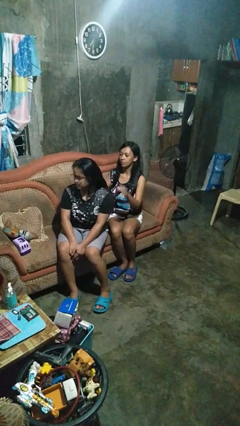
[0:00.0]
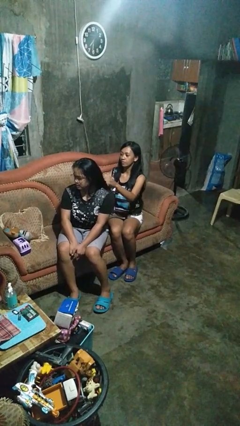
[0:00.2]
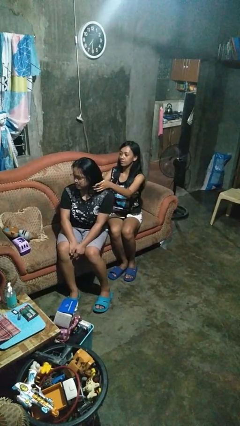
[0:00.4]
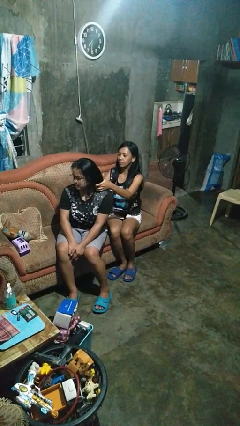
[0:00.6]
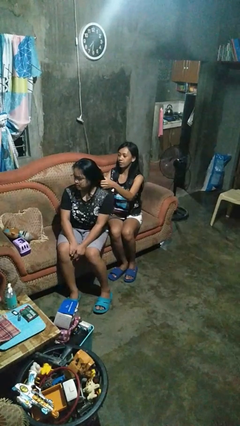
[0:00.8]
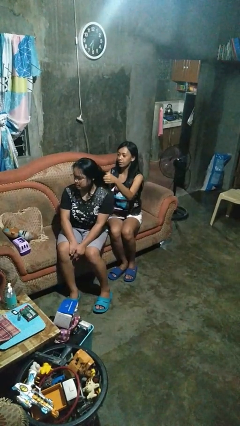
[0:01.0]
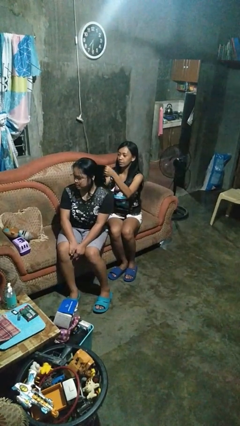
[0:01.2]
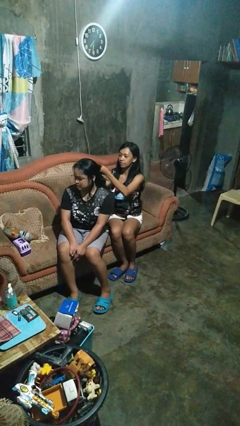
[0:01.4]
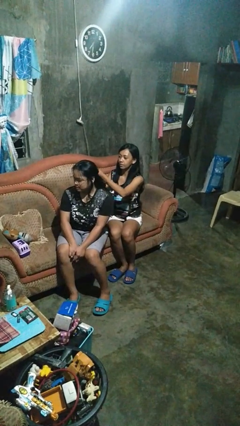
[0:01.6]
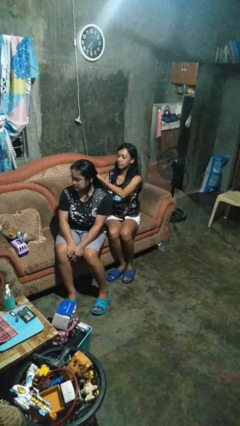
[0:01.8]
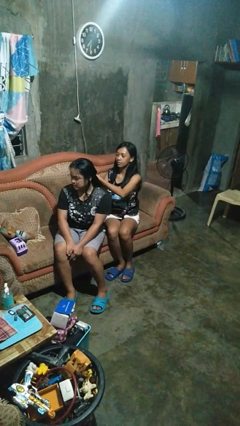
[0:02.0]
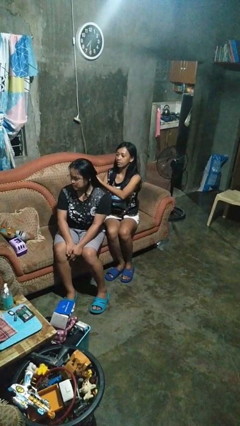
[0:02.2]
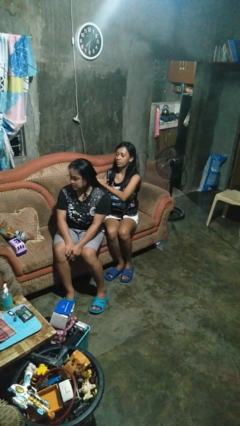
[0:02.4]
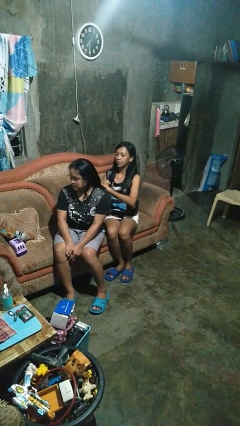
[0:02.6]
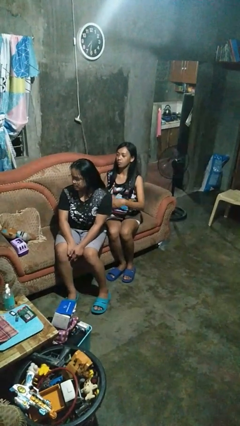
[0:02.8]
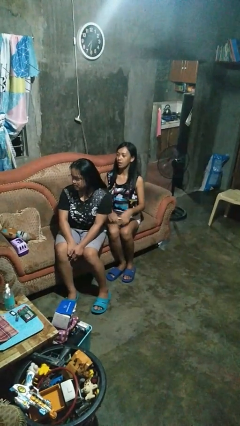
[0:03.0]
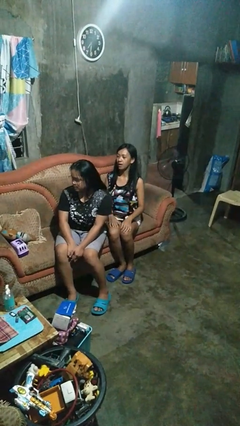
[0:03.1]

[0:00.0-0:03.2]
person braids hair of person

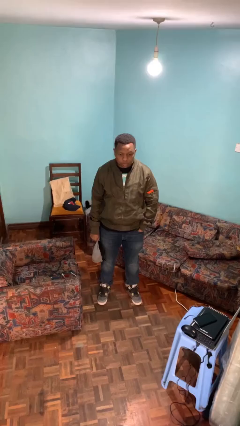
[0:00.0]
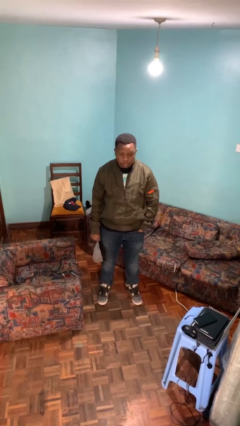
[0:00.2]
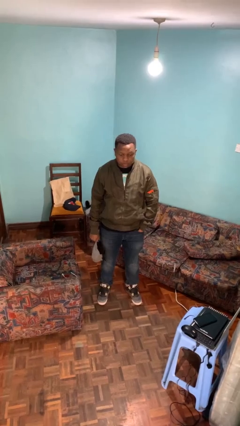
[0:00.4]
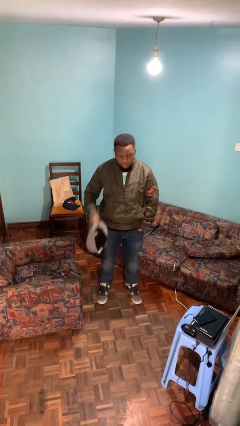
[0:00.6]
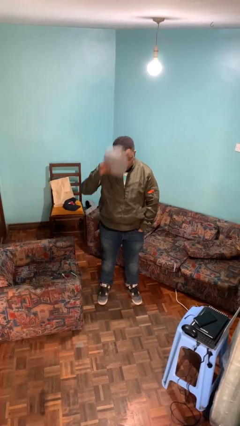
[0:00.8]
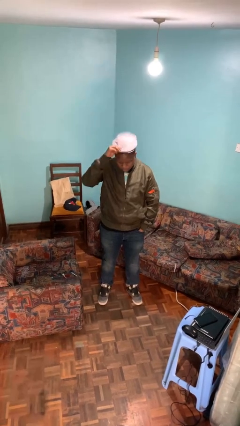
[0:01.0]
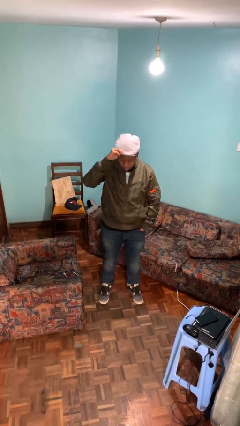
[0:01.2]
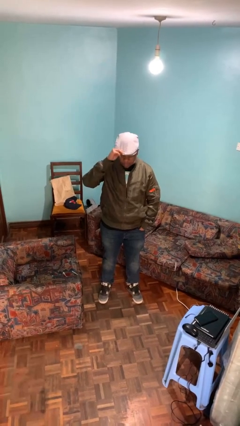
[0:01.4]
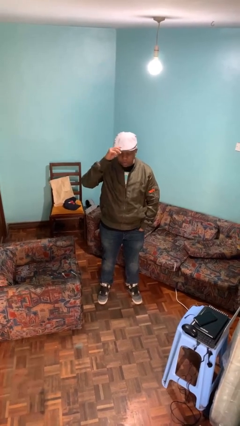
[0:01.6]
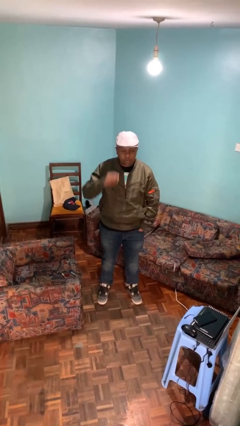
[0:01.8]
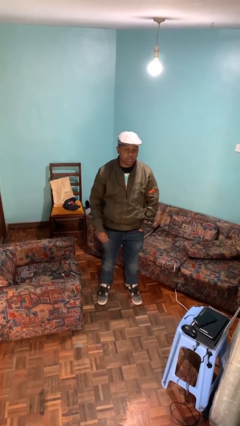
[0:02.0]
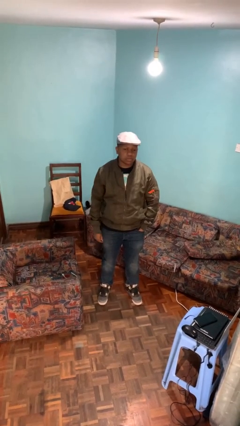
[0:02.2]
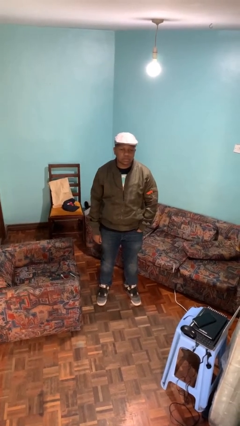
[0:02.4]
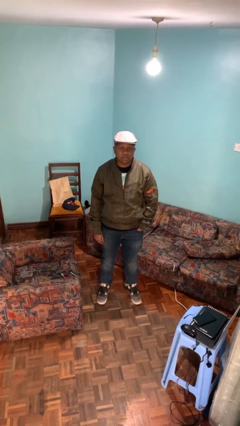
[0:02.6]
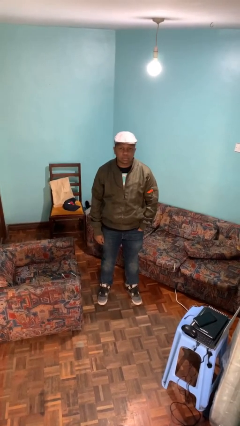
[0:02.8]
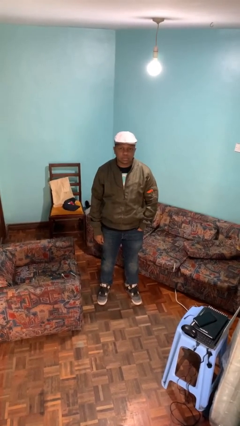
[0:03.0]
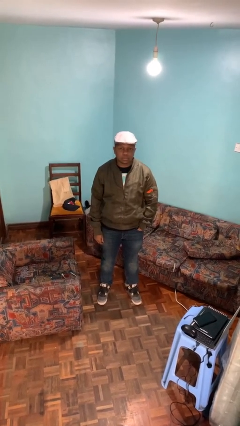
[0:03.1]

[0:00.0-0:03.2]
person puts on hat

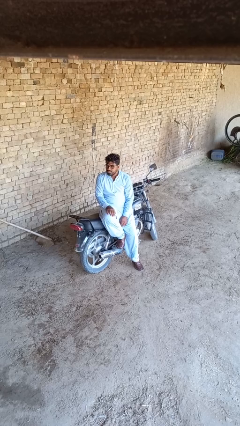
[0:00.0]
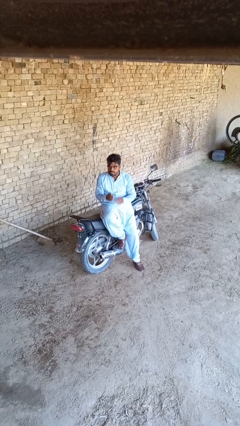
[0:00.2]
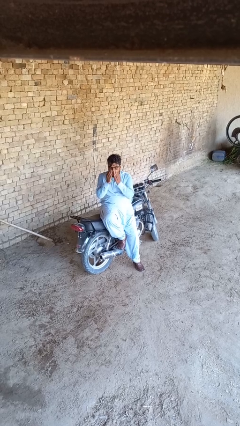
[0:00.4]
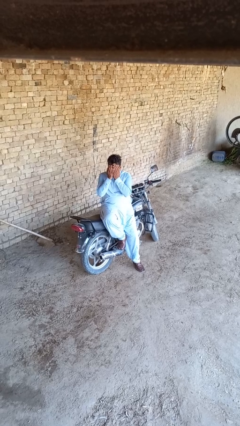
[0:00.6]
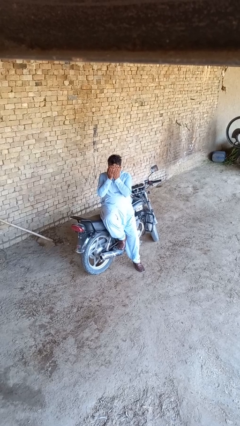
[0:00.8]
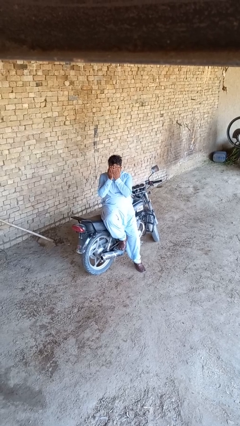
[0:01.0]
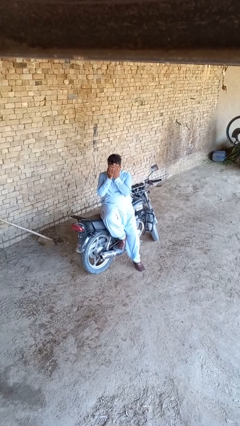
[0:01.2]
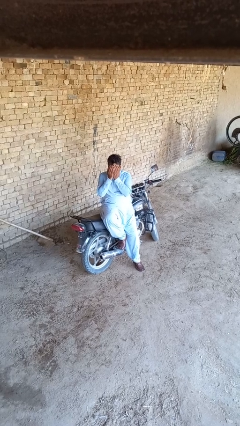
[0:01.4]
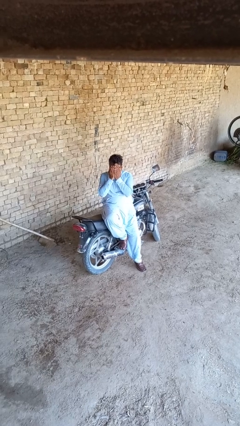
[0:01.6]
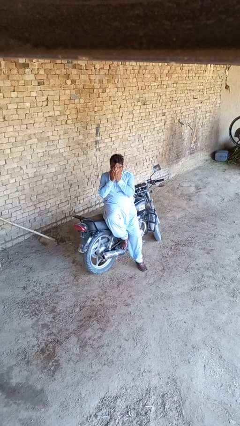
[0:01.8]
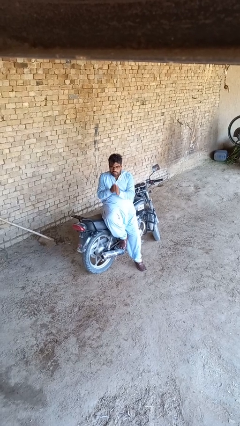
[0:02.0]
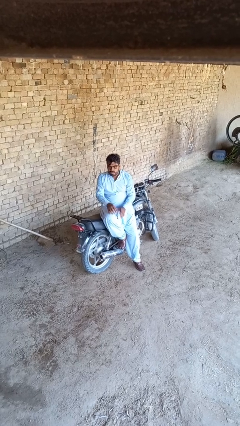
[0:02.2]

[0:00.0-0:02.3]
person covers face with hands

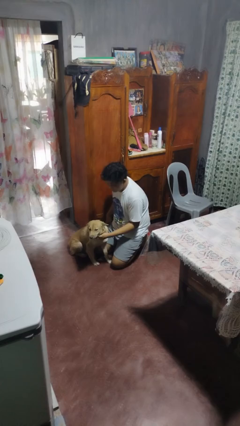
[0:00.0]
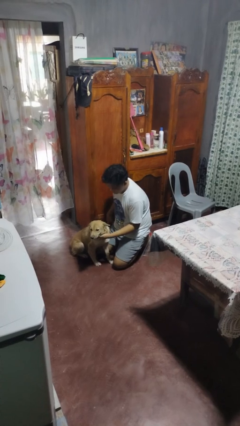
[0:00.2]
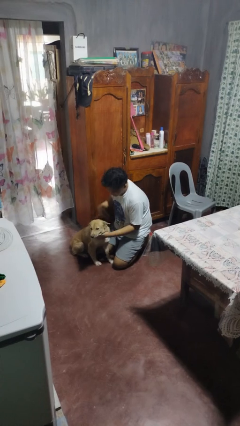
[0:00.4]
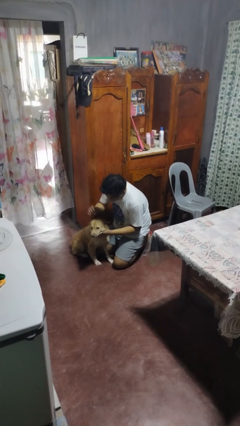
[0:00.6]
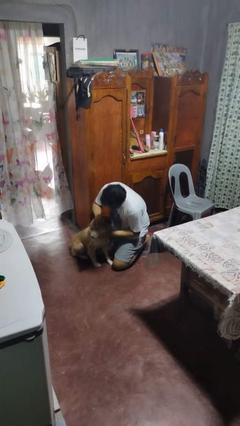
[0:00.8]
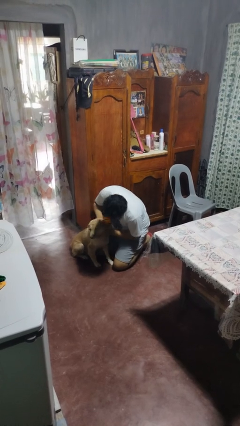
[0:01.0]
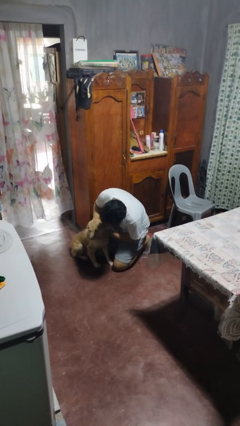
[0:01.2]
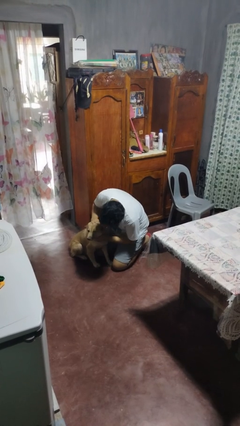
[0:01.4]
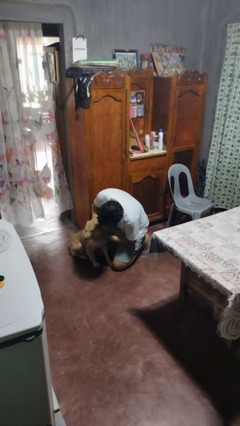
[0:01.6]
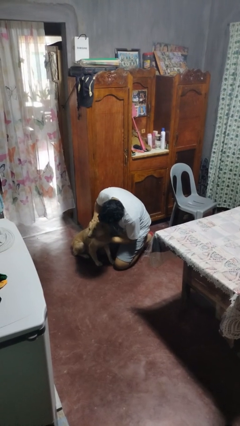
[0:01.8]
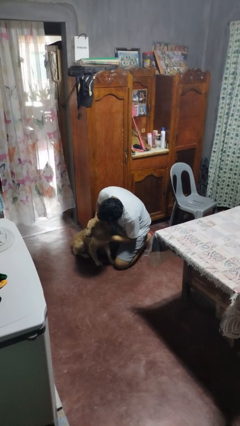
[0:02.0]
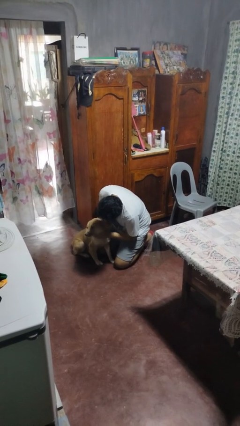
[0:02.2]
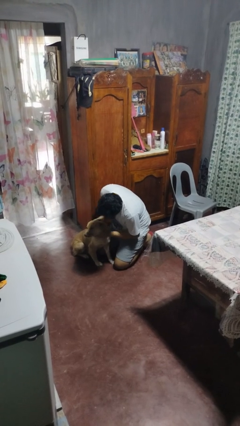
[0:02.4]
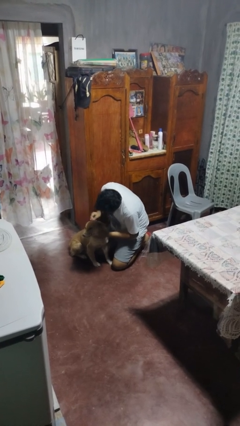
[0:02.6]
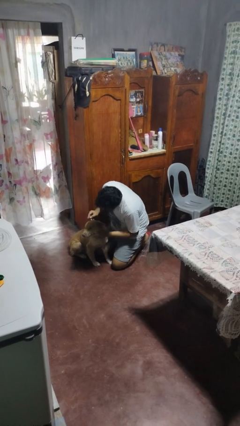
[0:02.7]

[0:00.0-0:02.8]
person pets dog

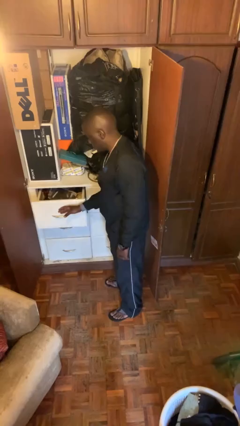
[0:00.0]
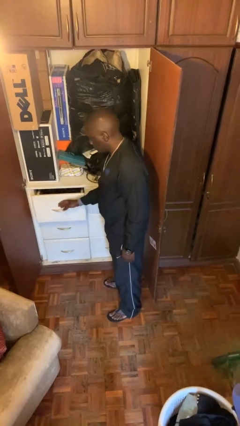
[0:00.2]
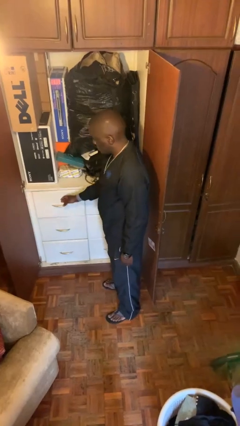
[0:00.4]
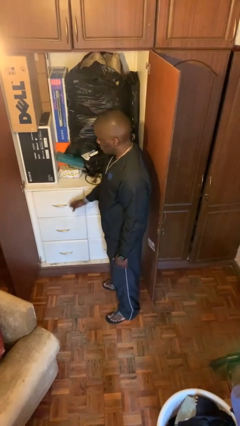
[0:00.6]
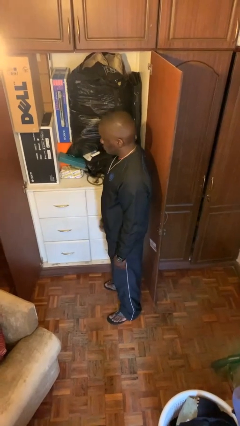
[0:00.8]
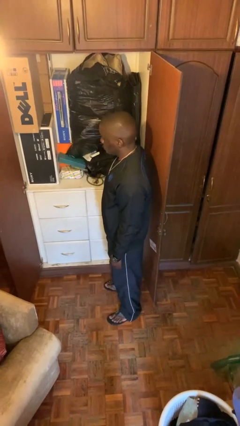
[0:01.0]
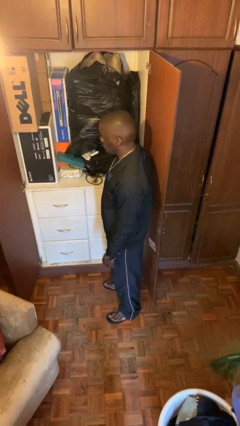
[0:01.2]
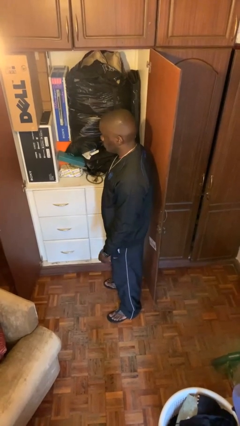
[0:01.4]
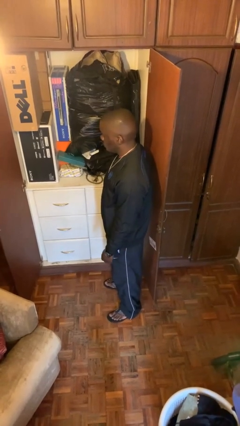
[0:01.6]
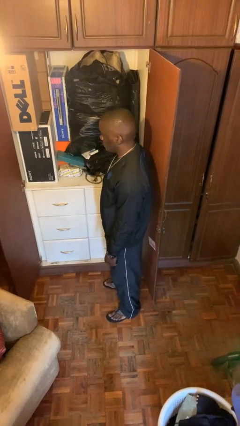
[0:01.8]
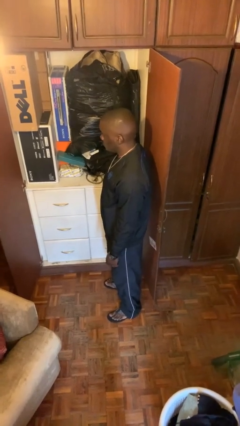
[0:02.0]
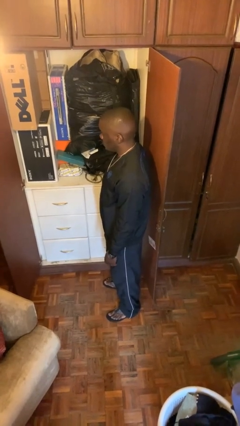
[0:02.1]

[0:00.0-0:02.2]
person closes dresser drawer

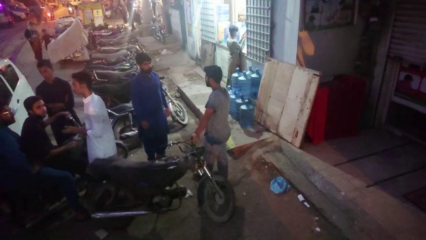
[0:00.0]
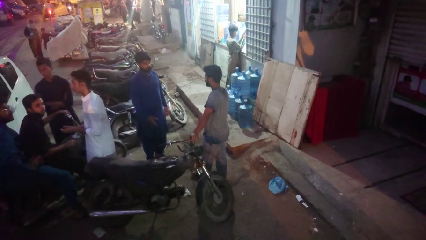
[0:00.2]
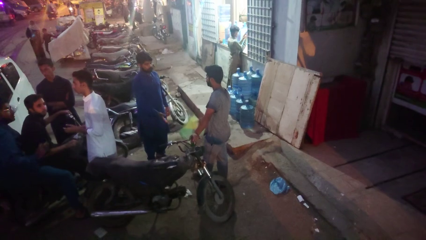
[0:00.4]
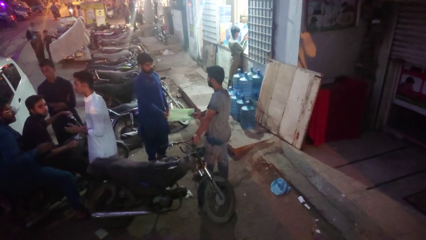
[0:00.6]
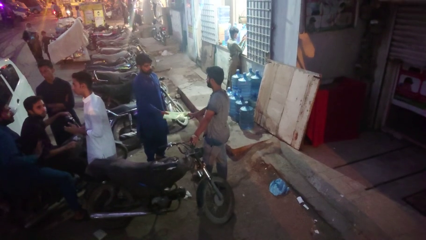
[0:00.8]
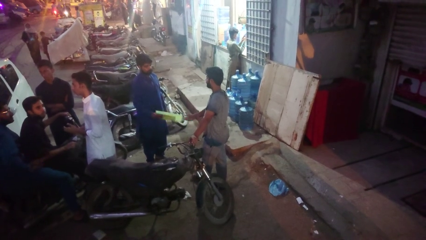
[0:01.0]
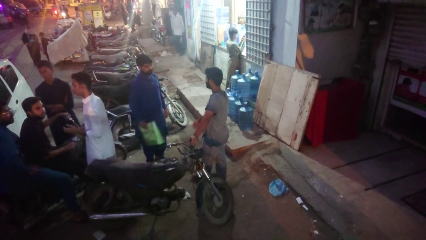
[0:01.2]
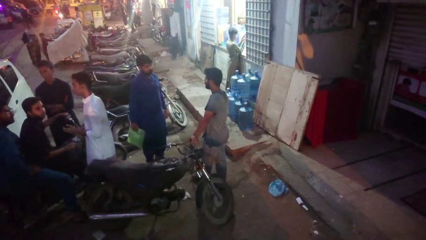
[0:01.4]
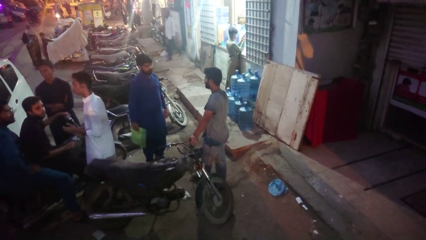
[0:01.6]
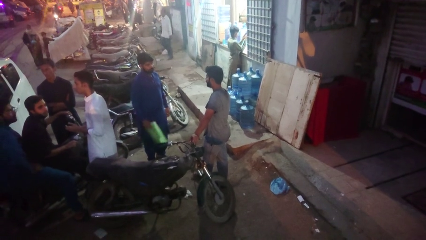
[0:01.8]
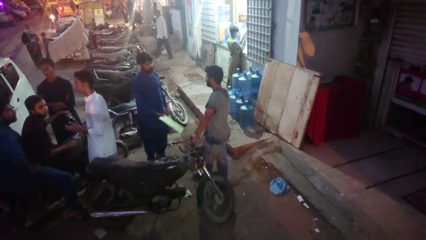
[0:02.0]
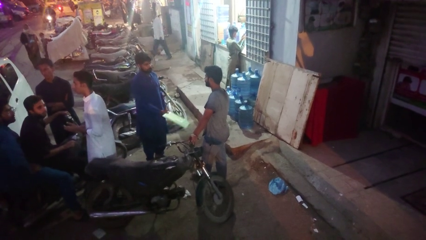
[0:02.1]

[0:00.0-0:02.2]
person transfers object to person

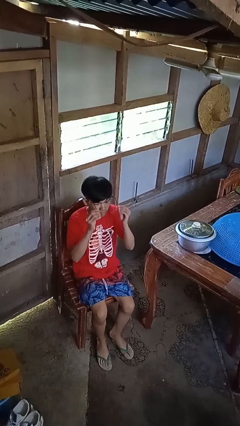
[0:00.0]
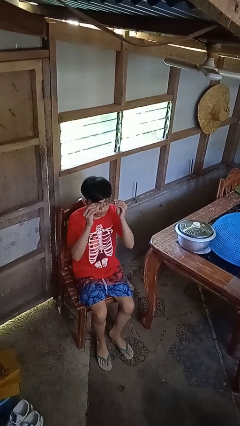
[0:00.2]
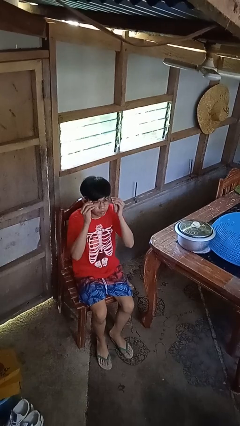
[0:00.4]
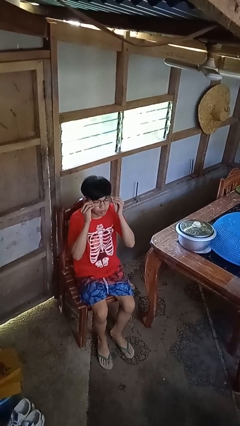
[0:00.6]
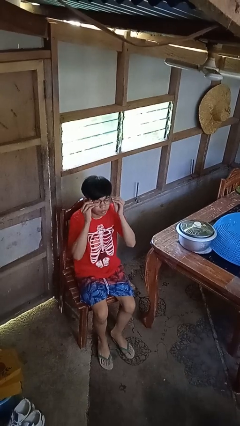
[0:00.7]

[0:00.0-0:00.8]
person puts on glasses

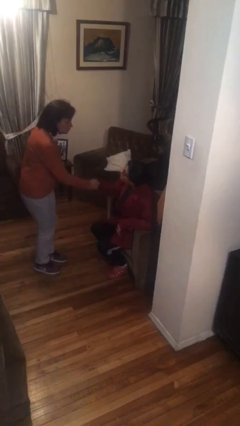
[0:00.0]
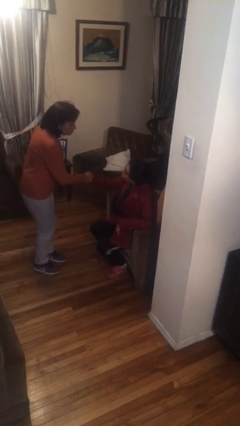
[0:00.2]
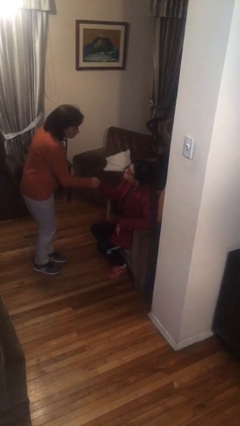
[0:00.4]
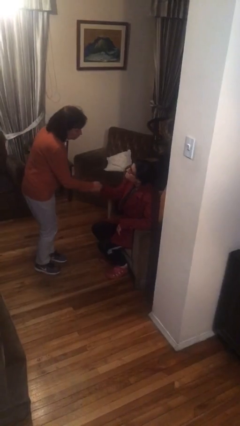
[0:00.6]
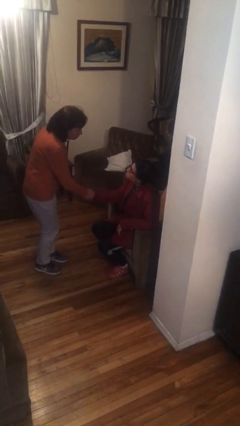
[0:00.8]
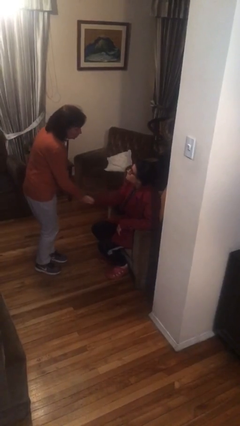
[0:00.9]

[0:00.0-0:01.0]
person shakes hand
